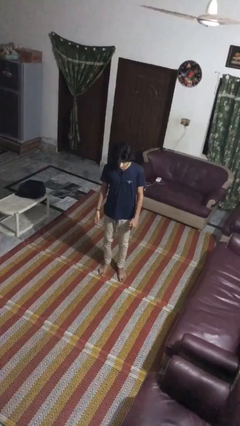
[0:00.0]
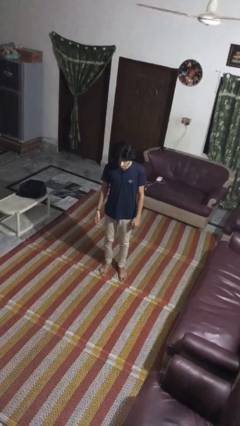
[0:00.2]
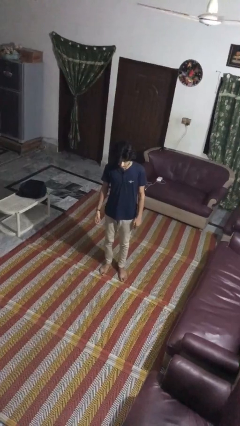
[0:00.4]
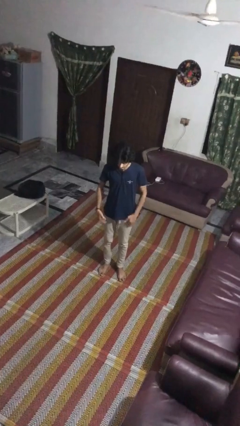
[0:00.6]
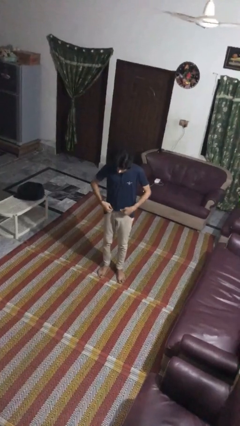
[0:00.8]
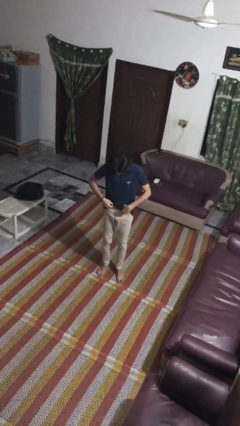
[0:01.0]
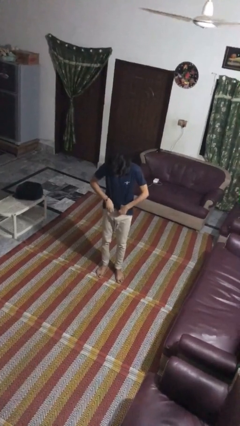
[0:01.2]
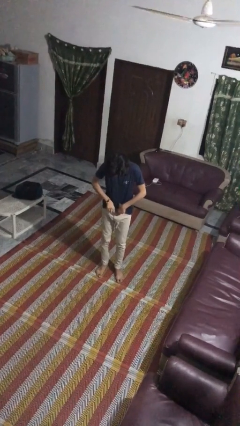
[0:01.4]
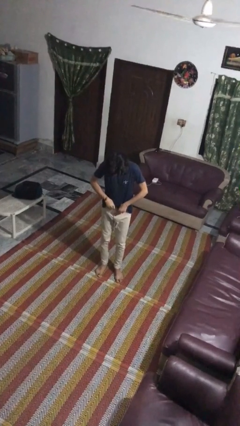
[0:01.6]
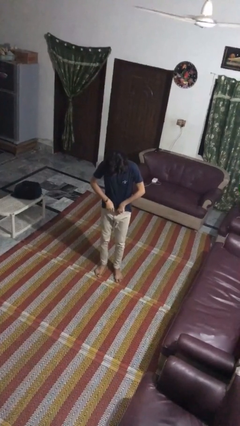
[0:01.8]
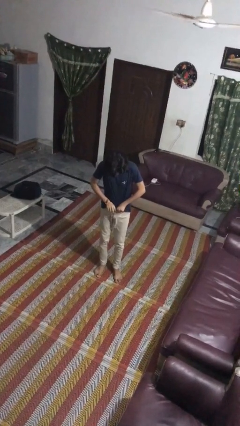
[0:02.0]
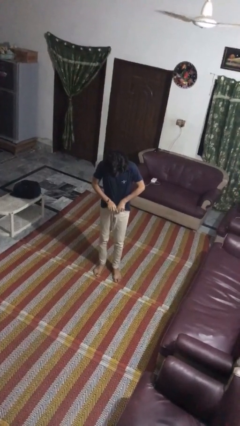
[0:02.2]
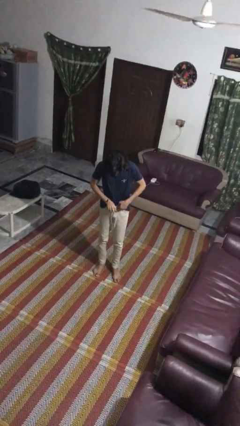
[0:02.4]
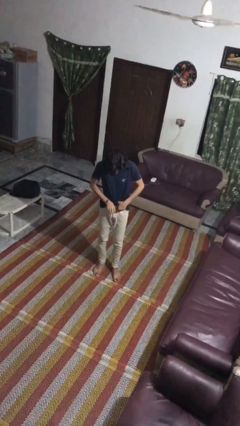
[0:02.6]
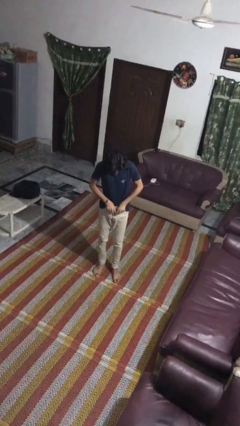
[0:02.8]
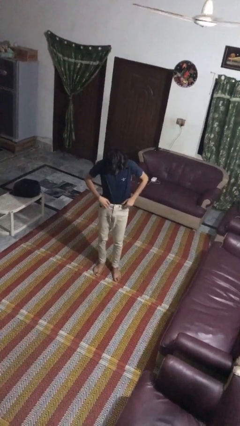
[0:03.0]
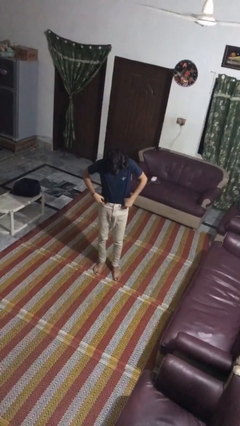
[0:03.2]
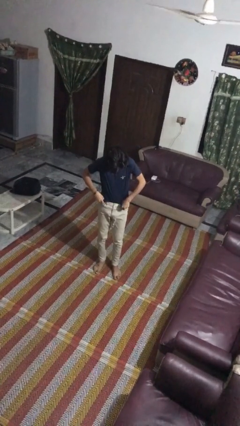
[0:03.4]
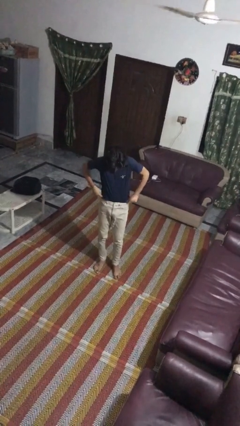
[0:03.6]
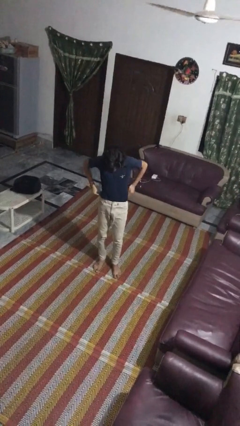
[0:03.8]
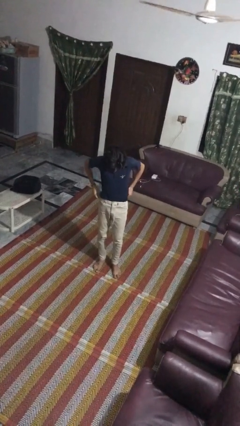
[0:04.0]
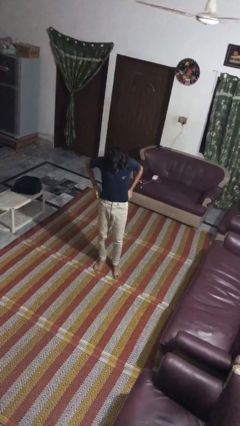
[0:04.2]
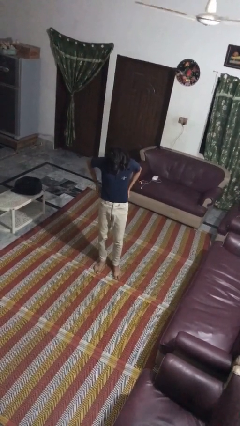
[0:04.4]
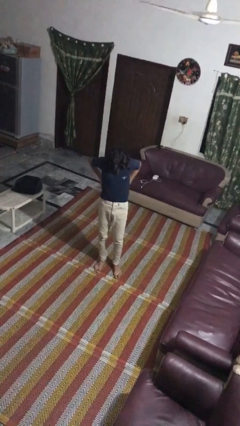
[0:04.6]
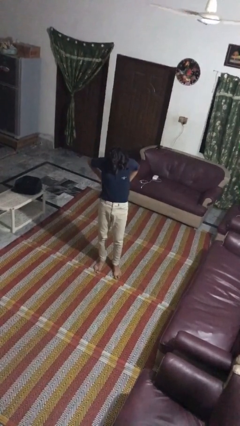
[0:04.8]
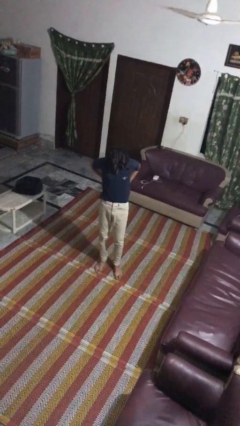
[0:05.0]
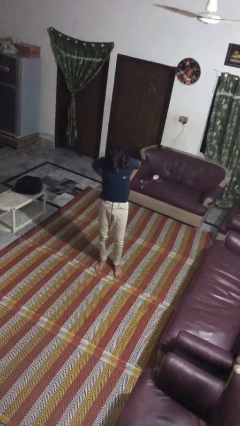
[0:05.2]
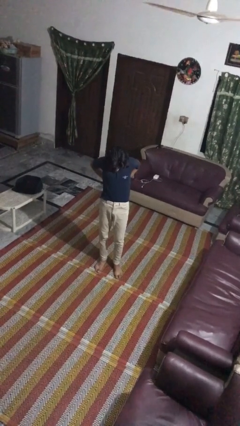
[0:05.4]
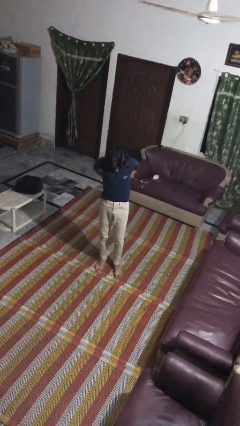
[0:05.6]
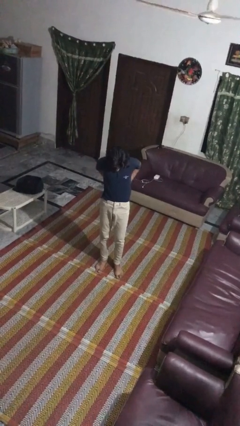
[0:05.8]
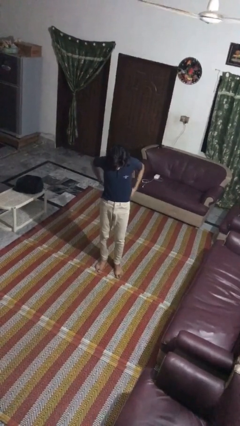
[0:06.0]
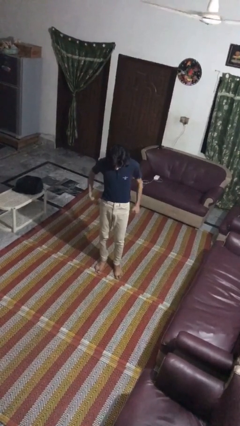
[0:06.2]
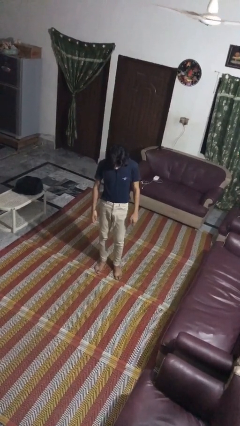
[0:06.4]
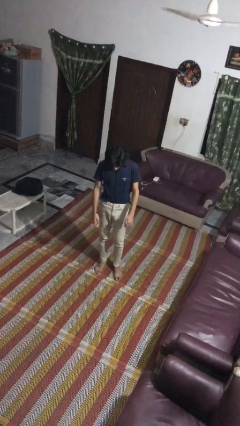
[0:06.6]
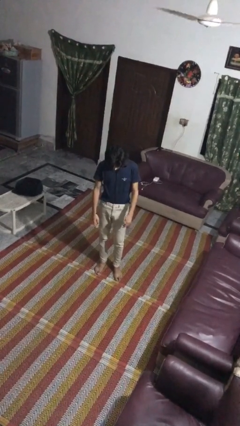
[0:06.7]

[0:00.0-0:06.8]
person tucks in shirt

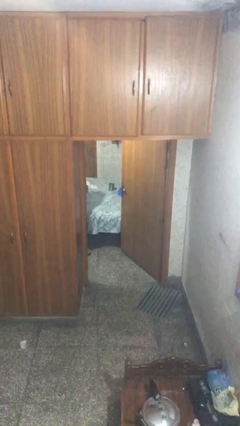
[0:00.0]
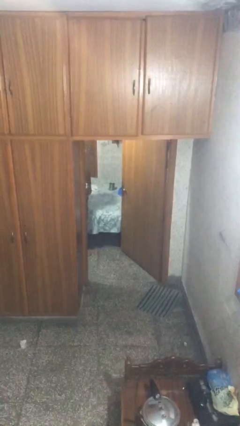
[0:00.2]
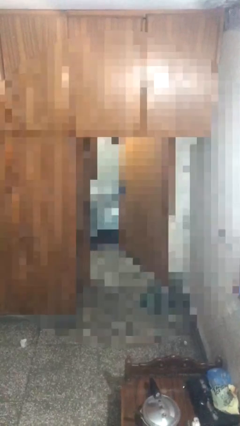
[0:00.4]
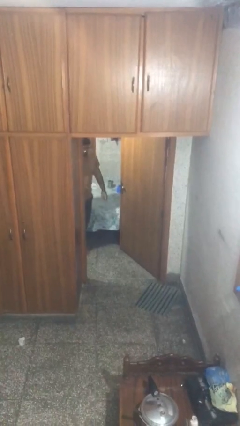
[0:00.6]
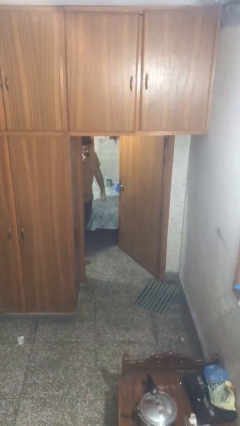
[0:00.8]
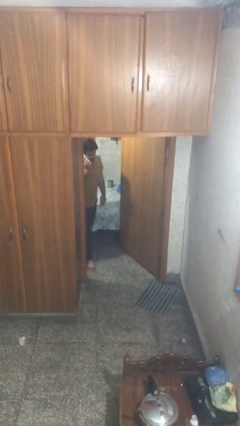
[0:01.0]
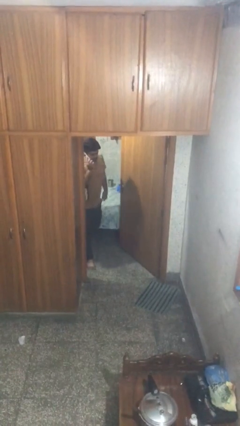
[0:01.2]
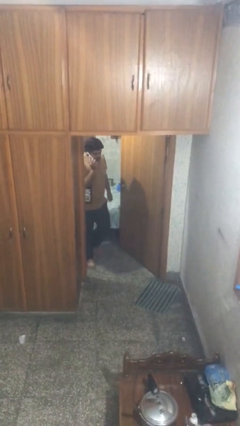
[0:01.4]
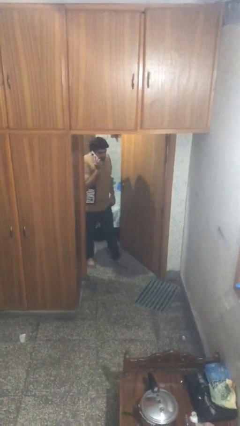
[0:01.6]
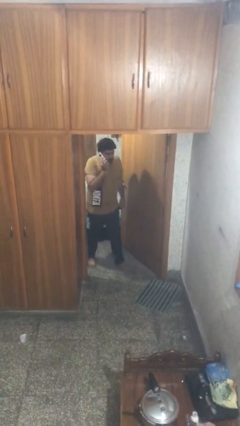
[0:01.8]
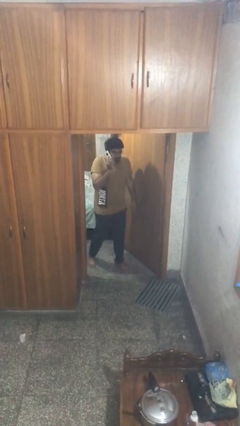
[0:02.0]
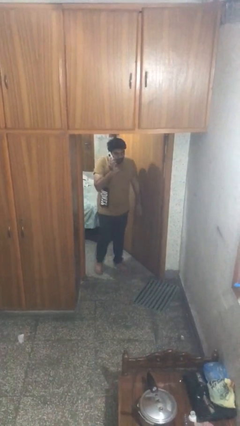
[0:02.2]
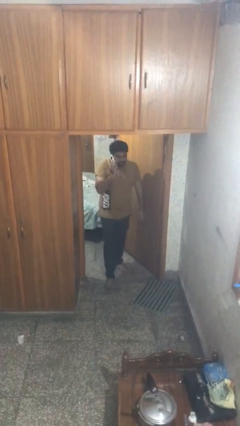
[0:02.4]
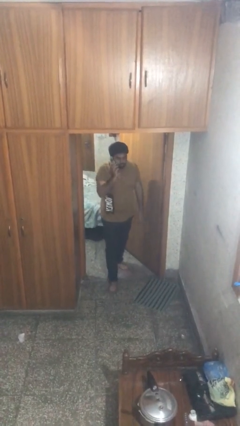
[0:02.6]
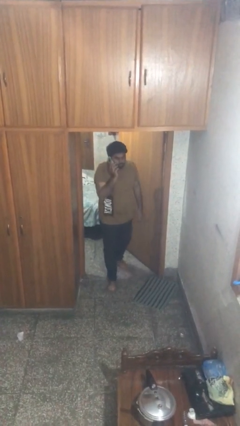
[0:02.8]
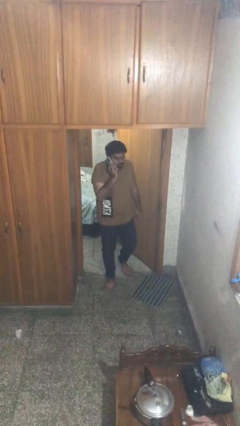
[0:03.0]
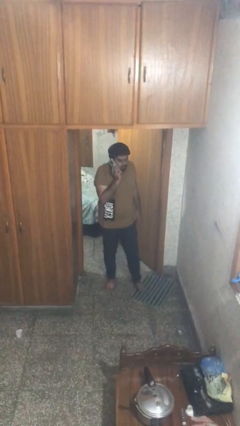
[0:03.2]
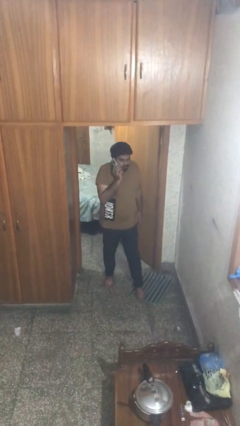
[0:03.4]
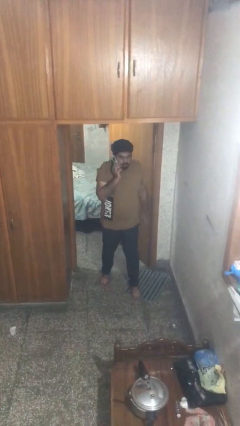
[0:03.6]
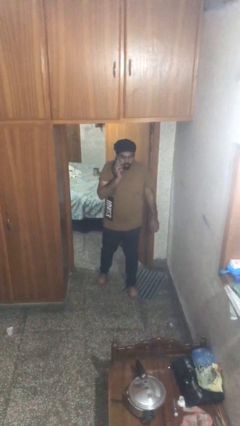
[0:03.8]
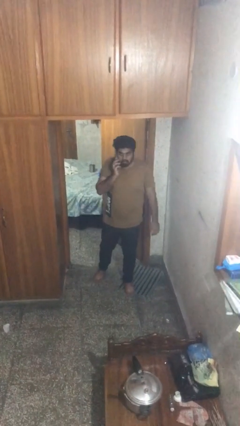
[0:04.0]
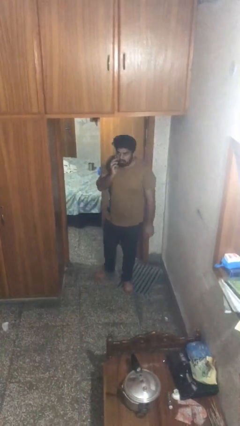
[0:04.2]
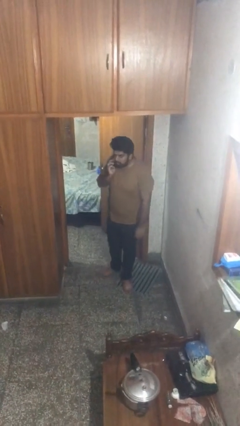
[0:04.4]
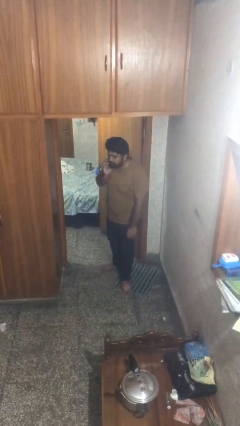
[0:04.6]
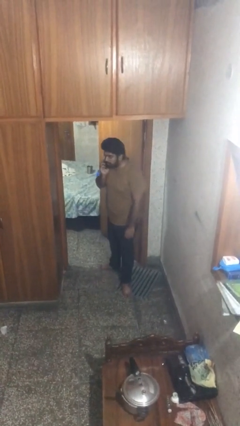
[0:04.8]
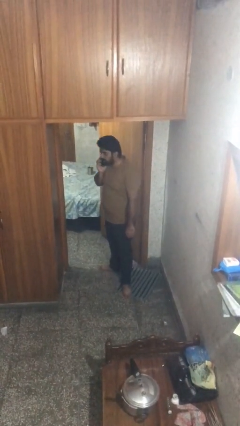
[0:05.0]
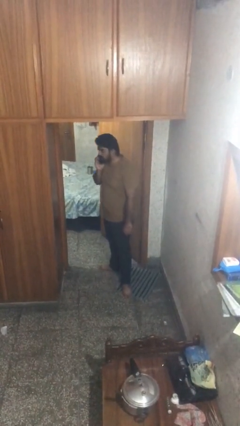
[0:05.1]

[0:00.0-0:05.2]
person enters scene through structure

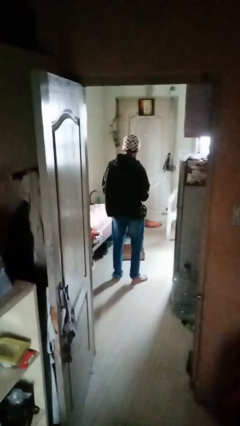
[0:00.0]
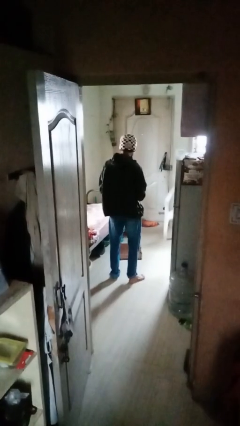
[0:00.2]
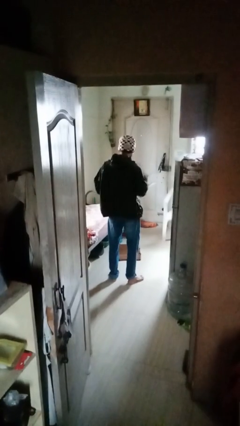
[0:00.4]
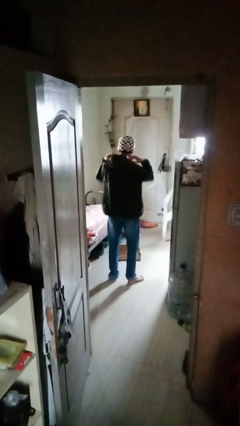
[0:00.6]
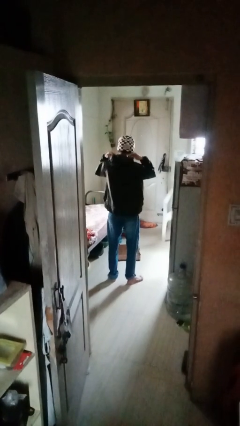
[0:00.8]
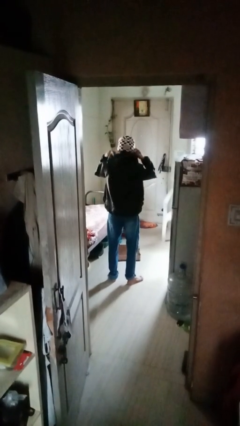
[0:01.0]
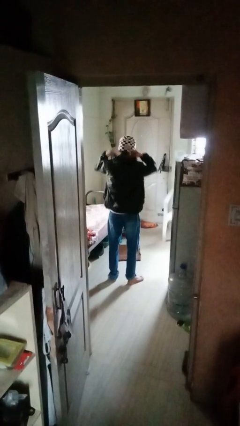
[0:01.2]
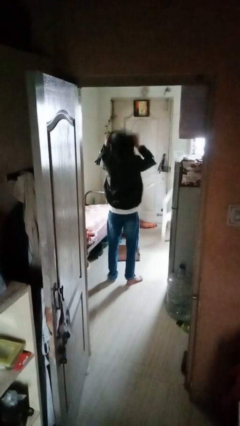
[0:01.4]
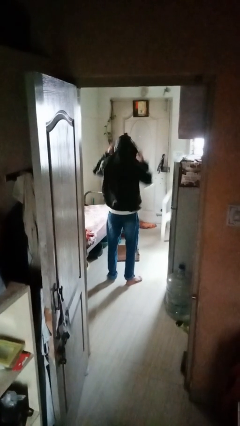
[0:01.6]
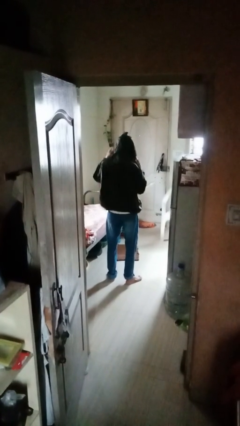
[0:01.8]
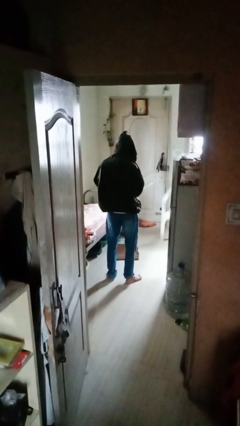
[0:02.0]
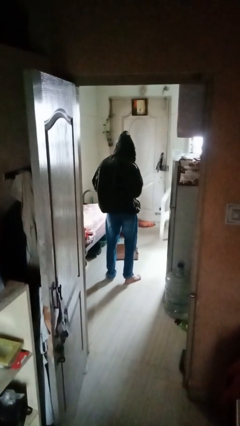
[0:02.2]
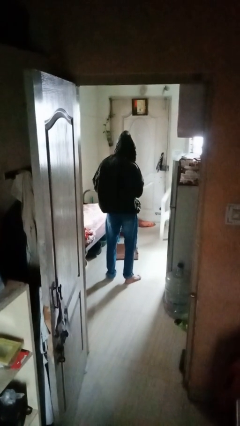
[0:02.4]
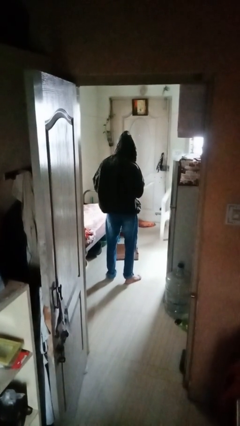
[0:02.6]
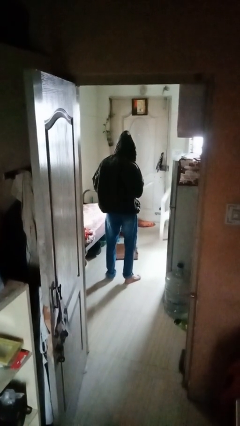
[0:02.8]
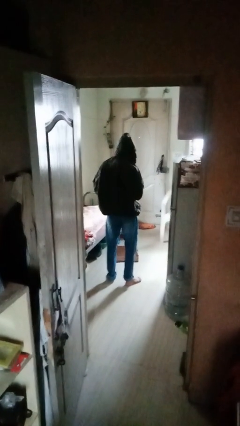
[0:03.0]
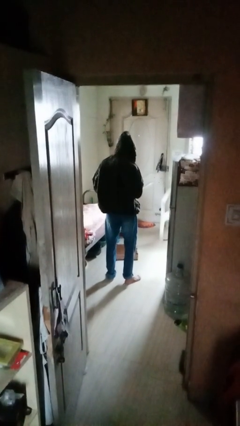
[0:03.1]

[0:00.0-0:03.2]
person puts on hoodie

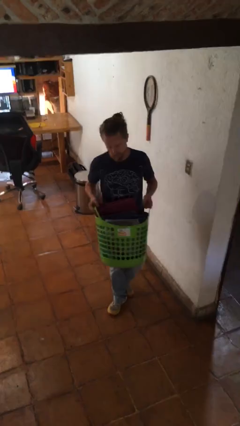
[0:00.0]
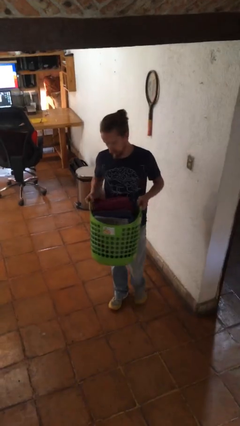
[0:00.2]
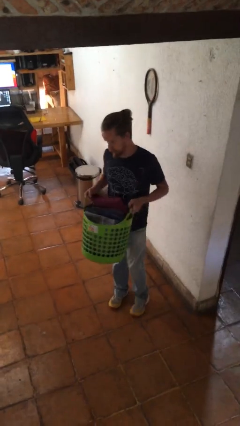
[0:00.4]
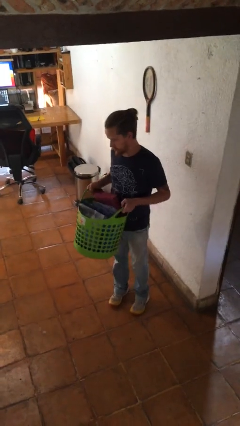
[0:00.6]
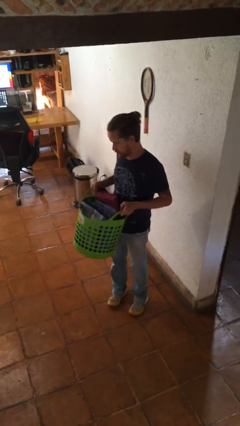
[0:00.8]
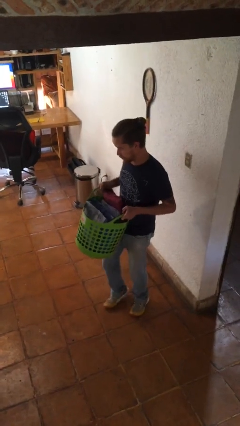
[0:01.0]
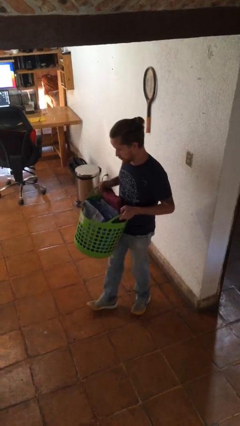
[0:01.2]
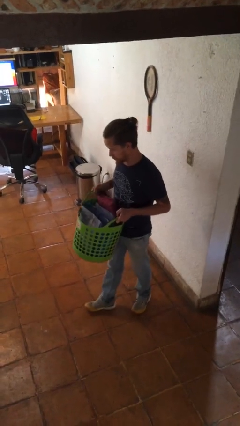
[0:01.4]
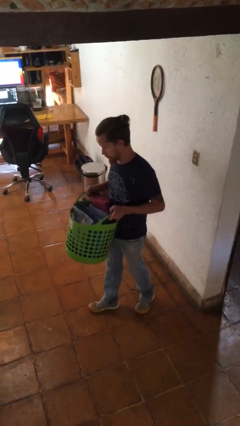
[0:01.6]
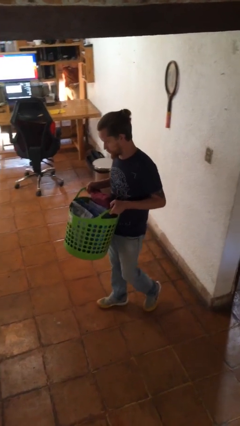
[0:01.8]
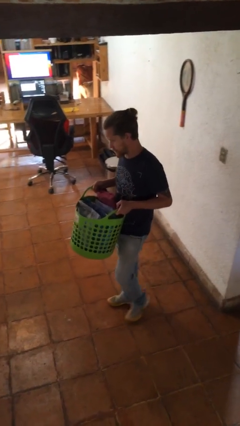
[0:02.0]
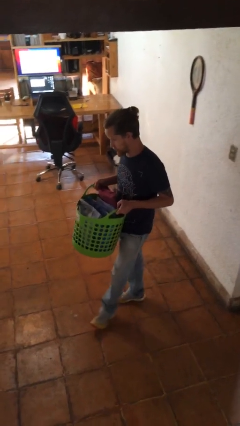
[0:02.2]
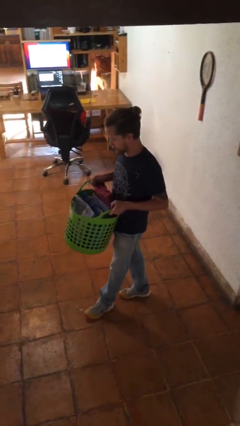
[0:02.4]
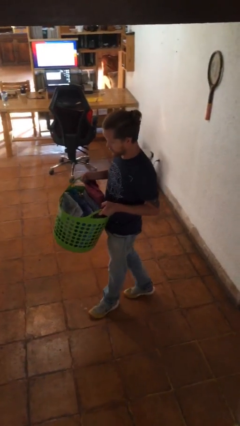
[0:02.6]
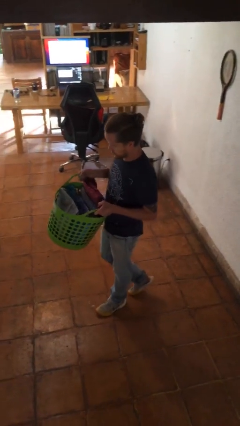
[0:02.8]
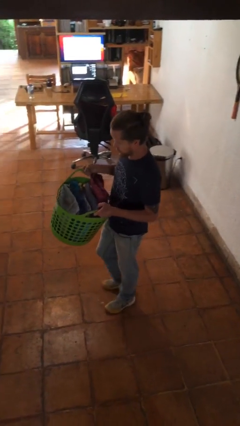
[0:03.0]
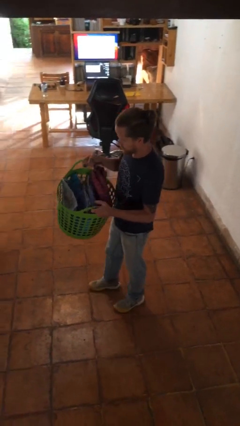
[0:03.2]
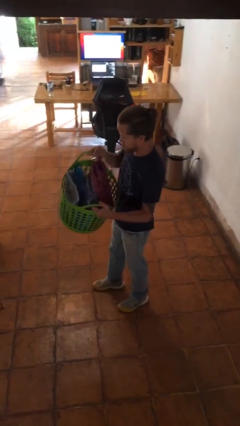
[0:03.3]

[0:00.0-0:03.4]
person carries laundry basket
